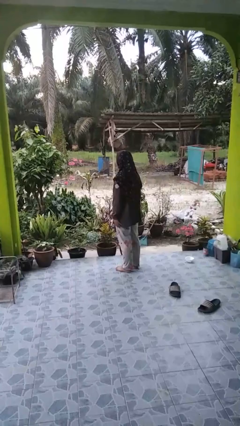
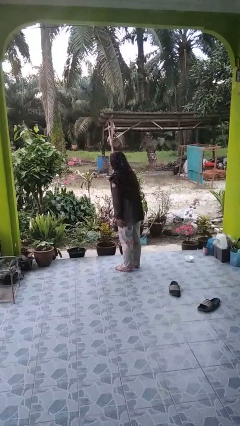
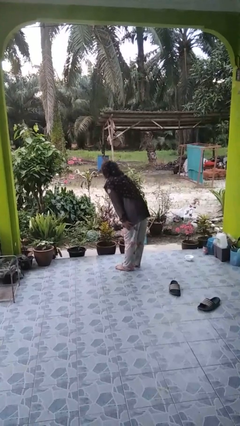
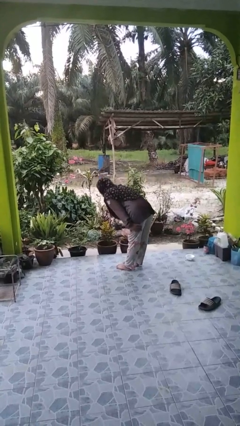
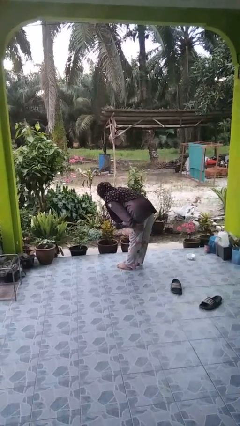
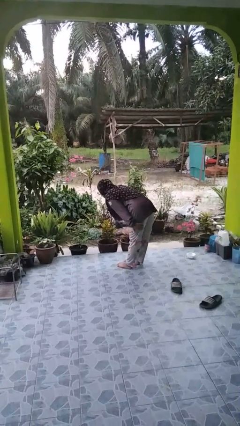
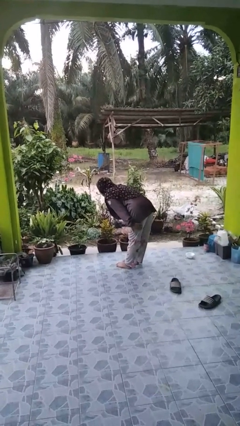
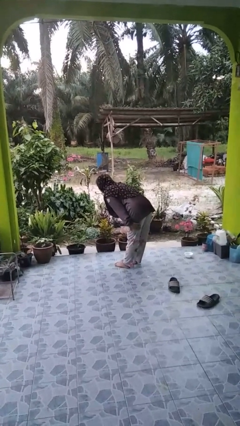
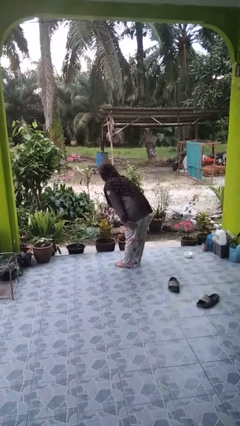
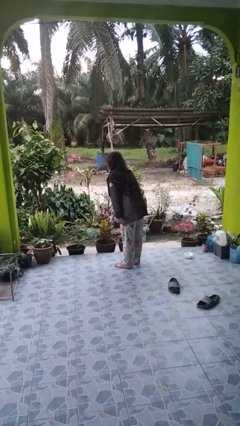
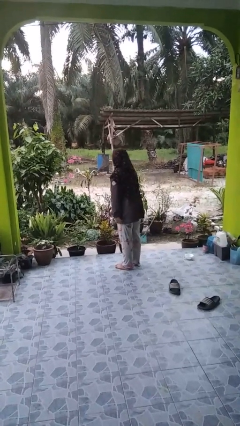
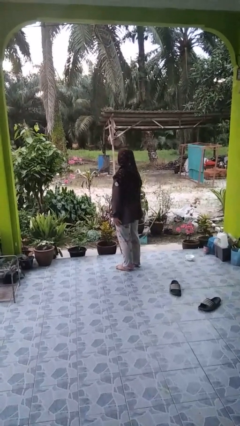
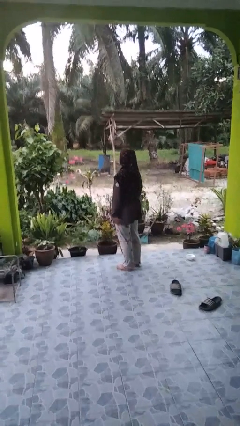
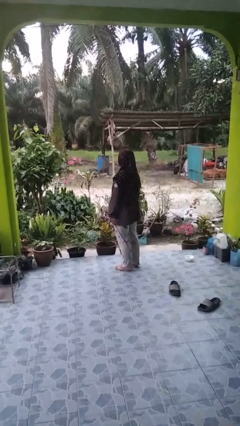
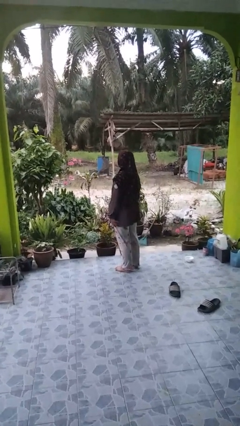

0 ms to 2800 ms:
person bows

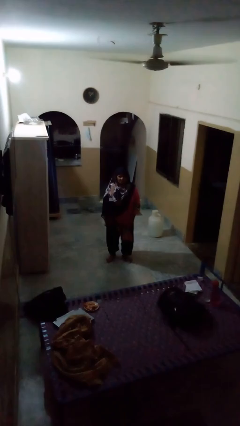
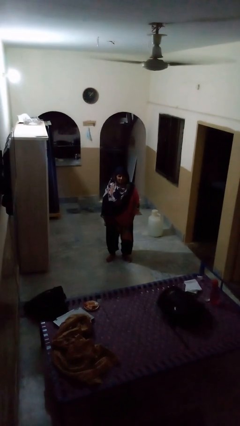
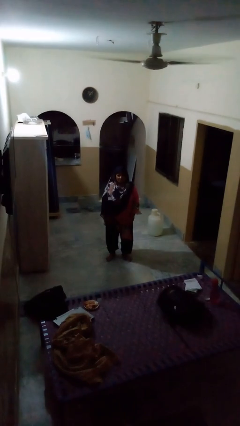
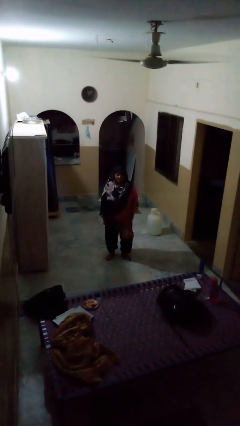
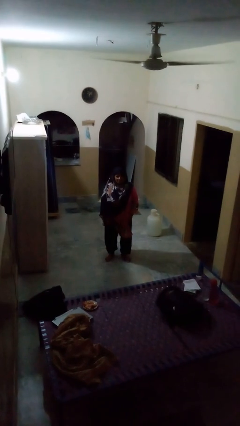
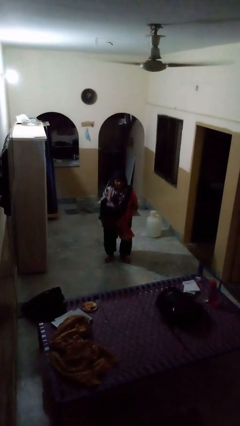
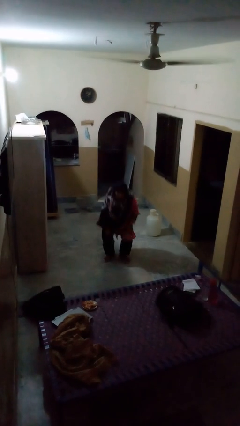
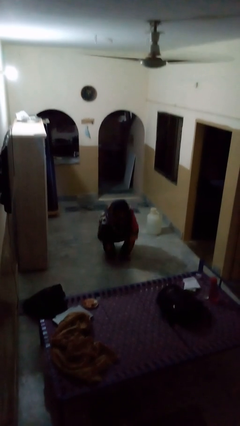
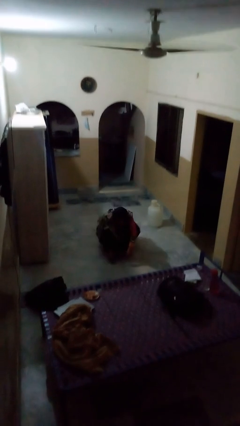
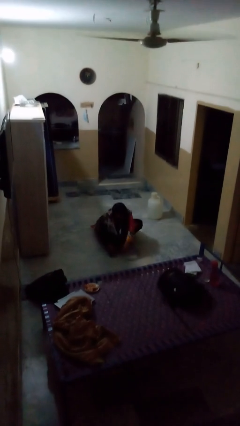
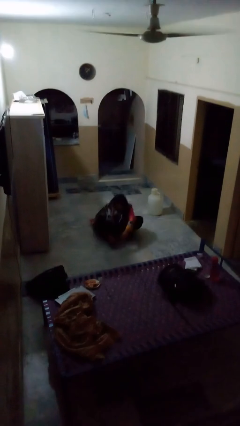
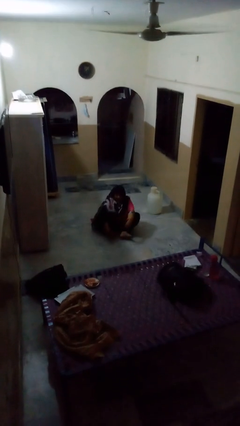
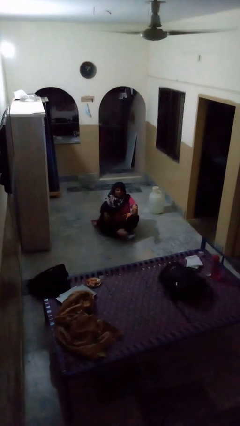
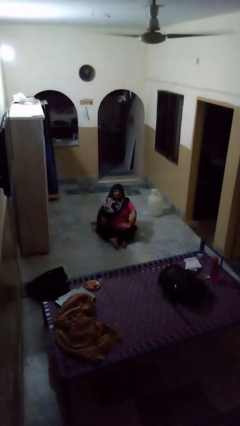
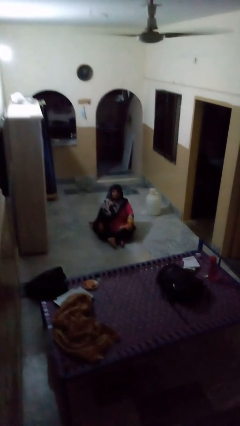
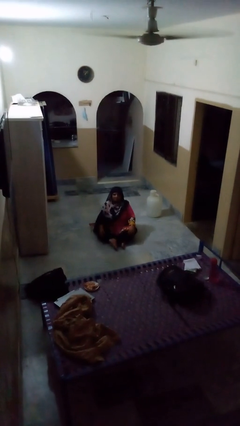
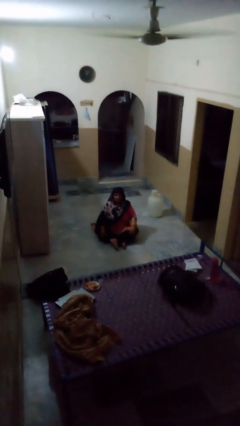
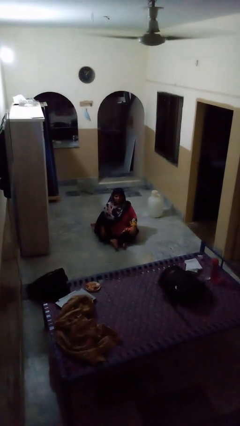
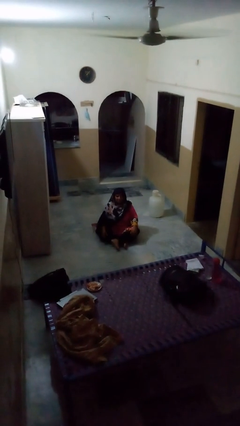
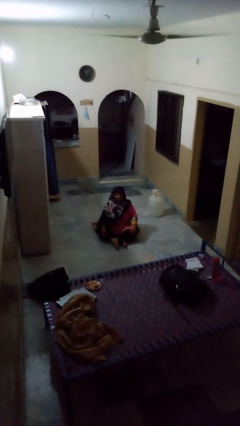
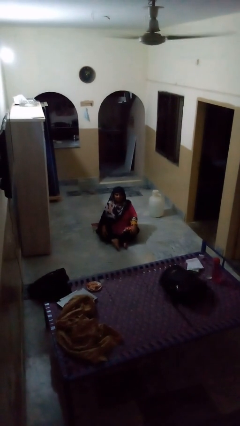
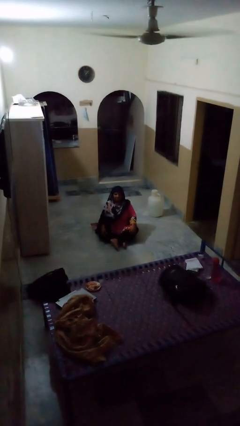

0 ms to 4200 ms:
person sits crisscross

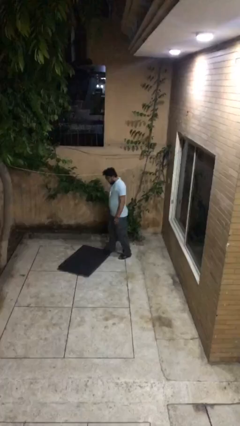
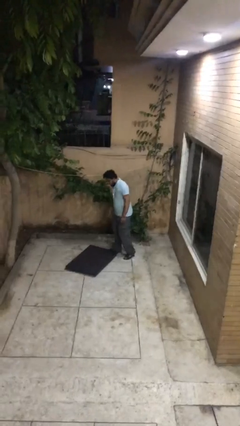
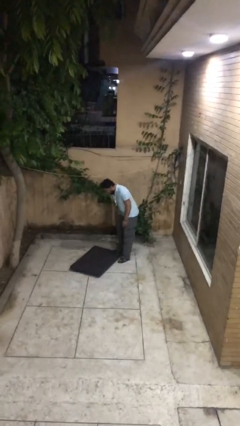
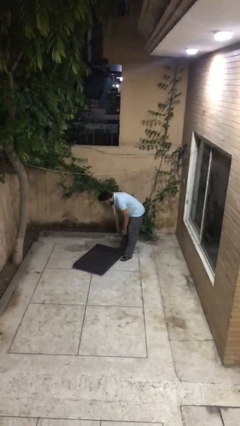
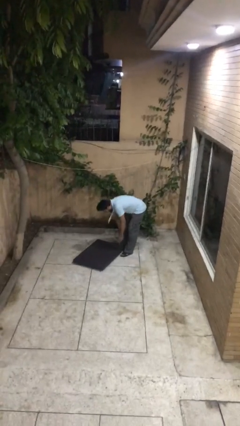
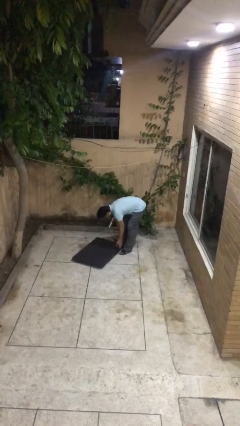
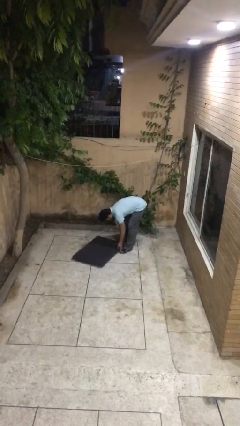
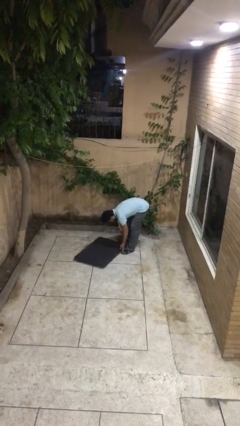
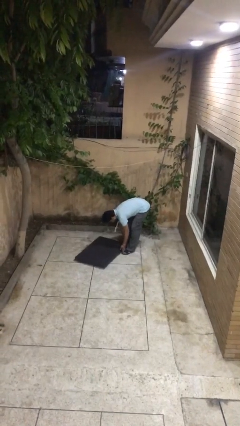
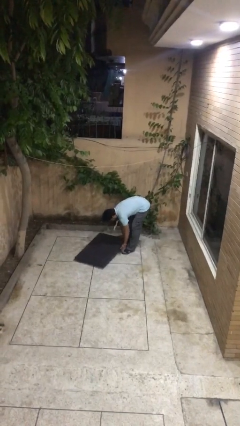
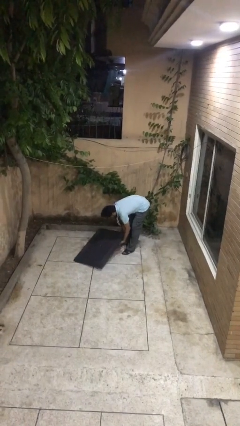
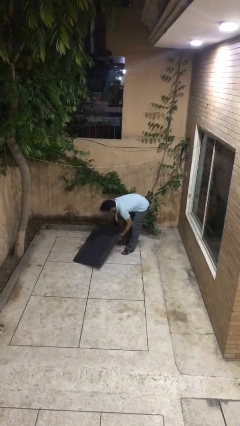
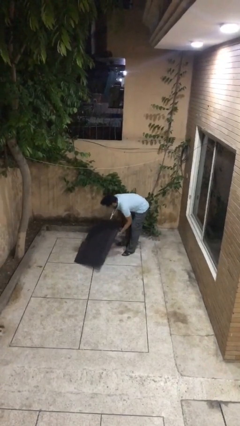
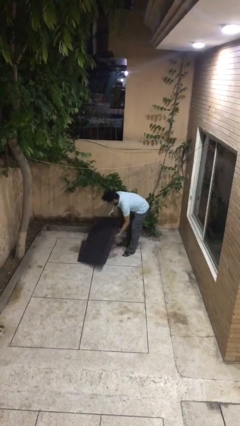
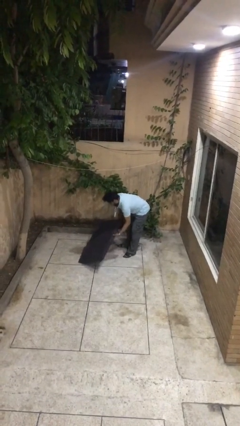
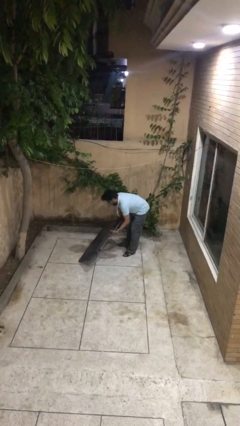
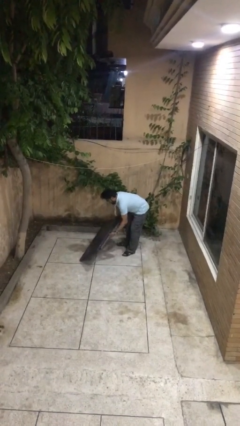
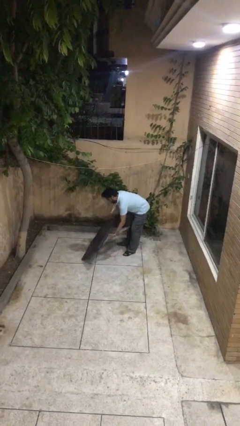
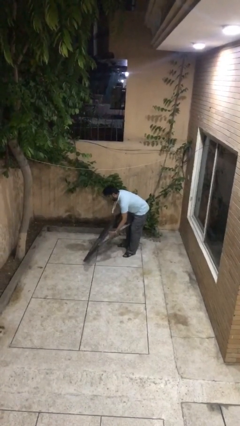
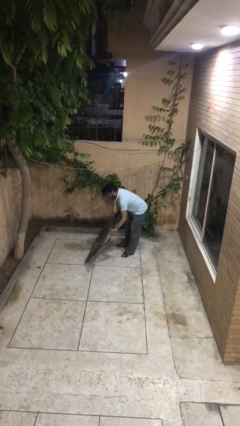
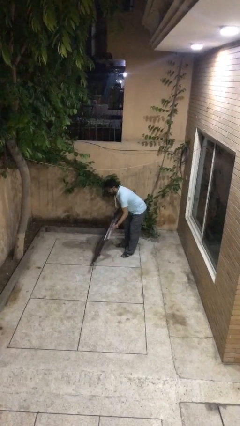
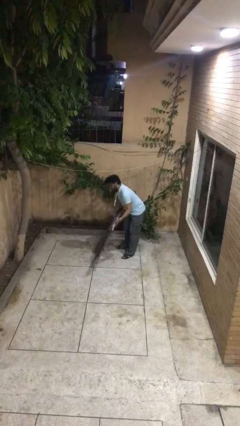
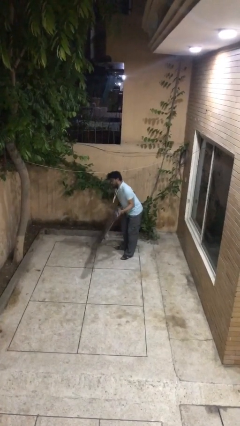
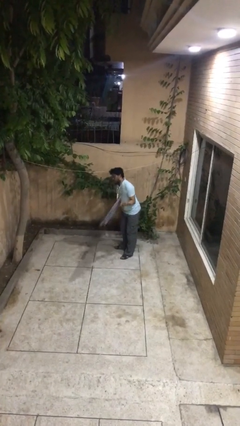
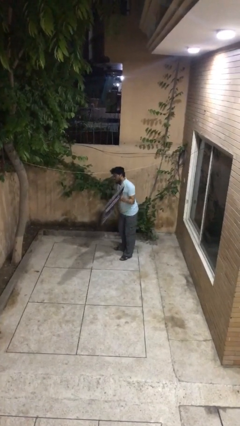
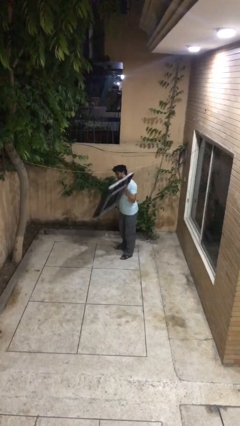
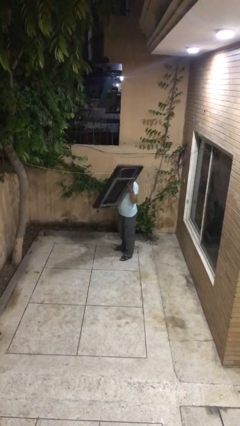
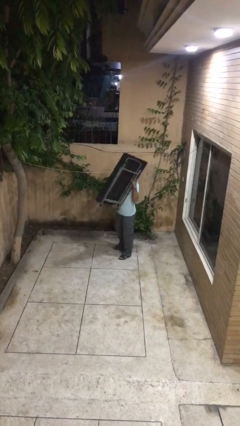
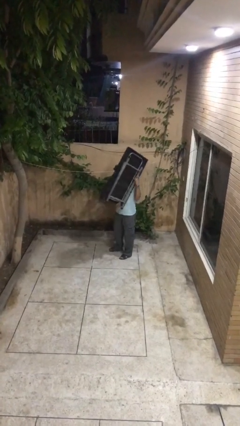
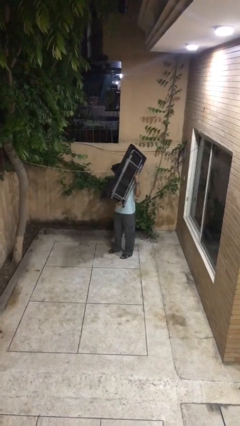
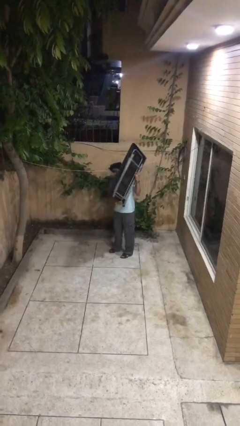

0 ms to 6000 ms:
person picks up object from floor

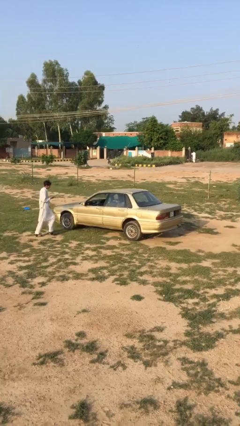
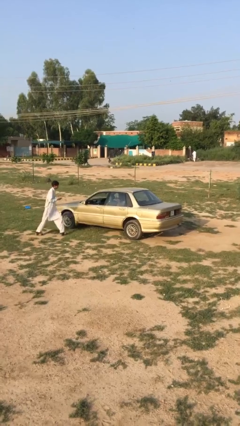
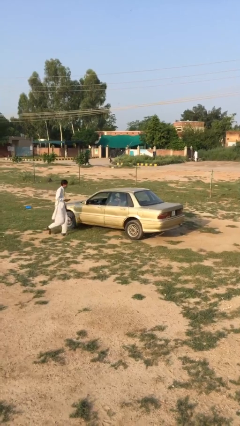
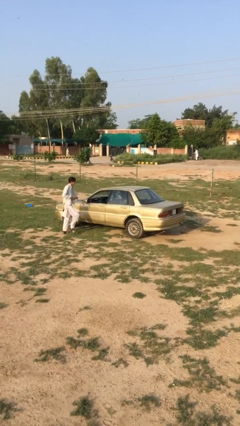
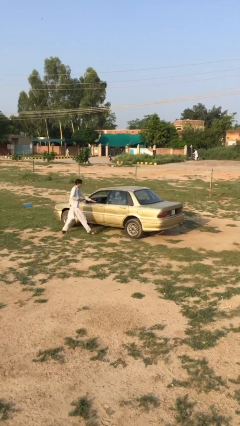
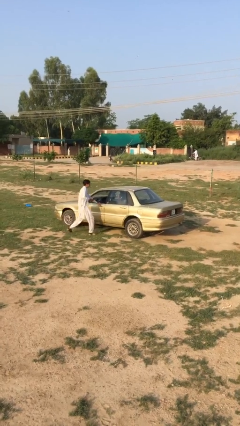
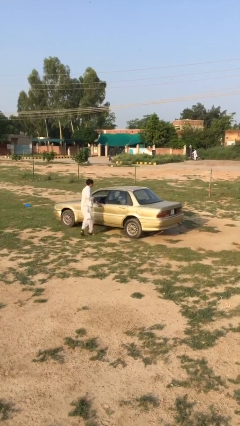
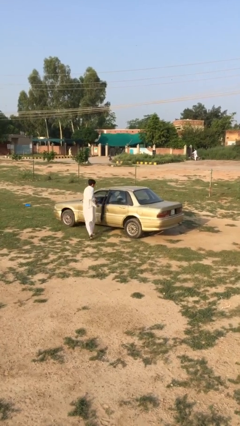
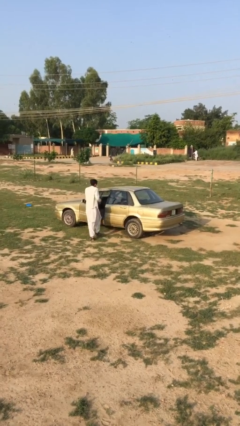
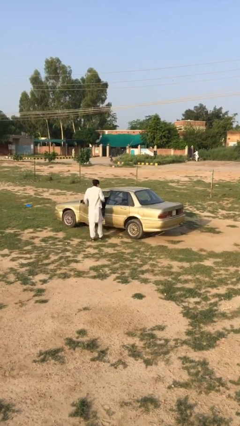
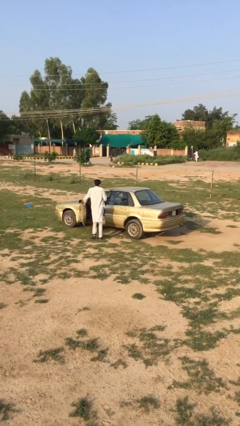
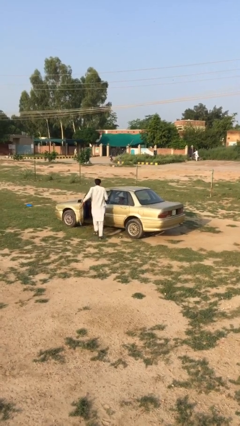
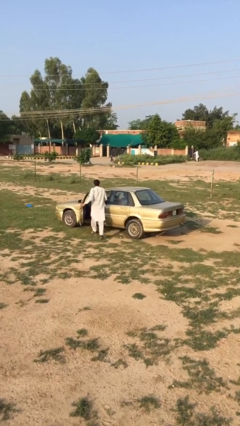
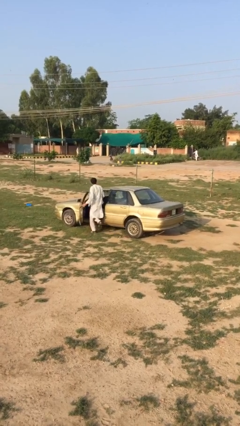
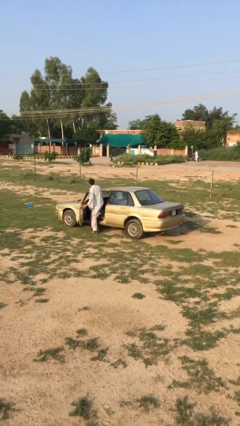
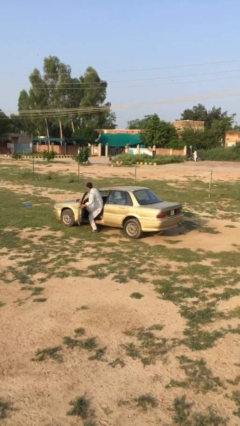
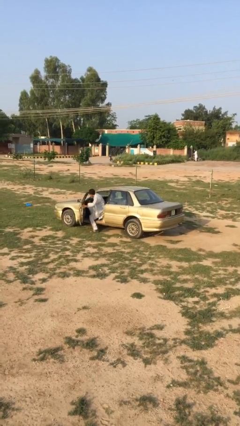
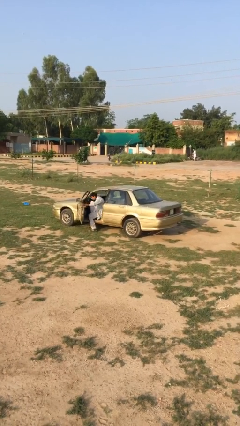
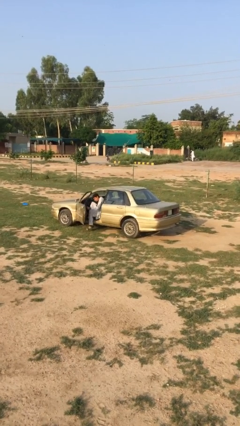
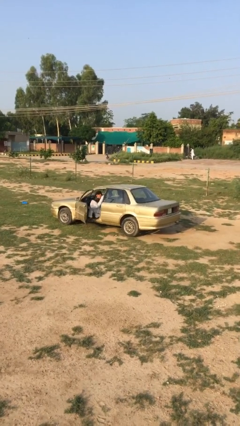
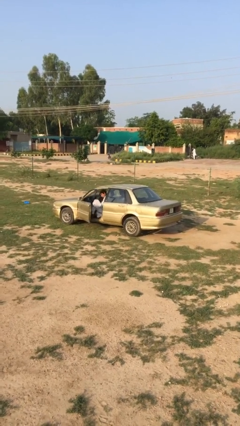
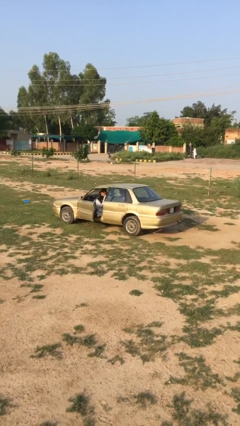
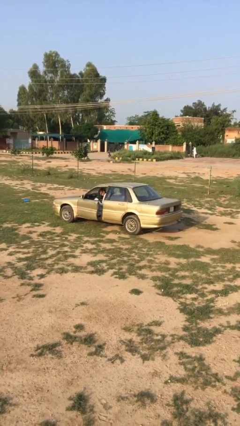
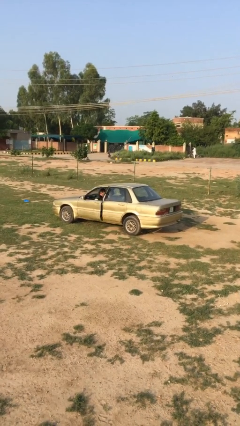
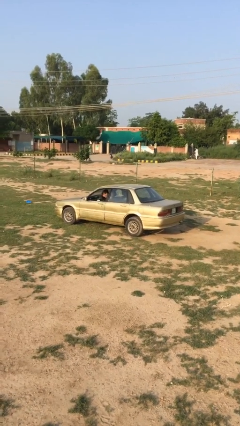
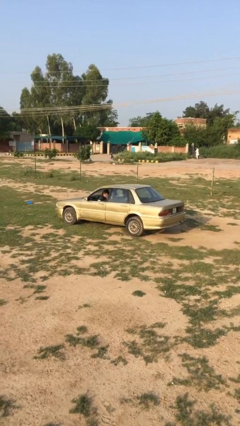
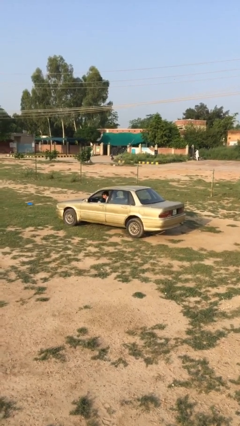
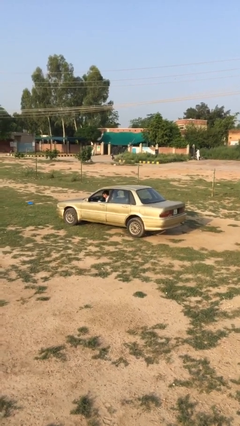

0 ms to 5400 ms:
car picks up person
